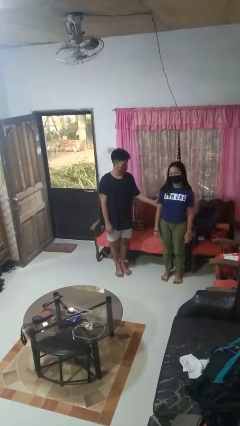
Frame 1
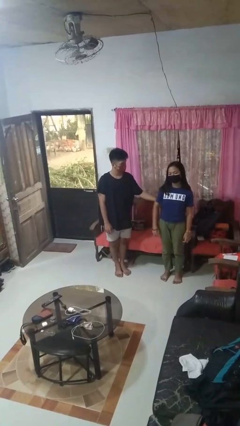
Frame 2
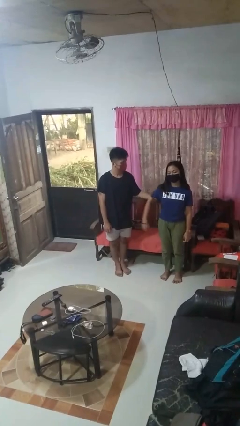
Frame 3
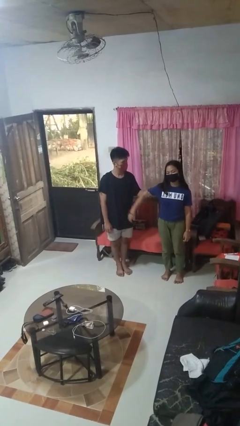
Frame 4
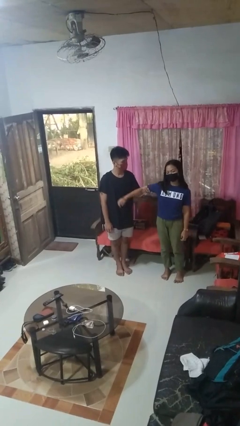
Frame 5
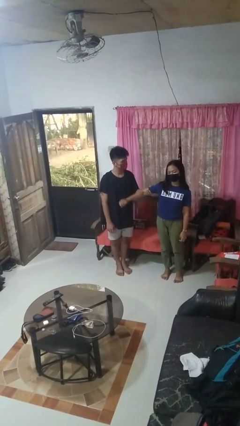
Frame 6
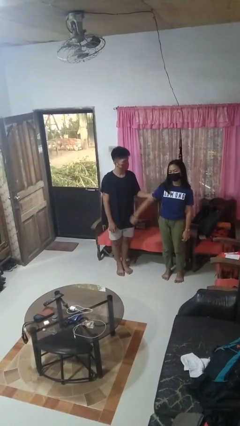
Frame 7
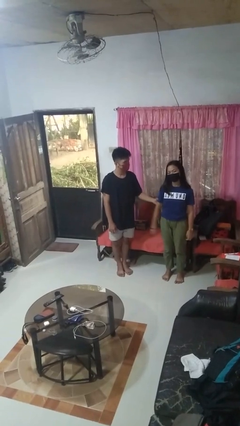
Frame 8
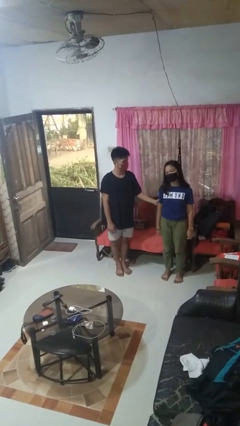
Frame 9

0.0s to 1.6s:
person grabs person by bicep

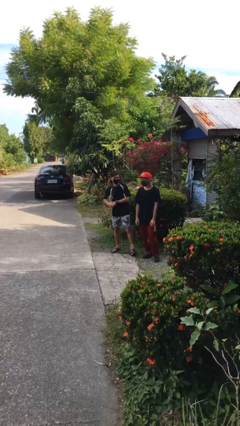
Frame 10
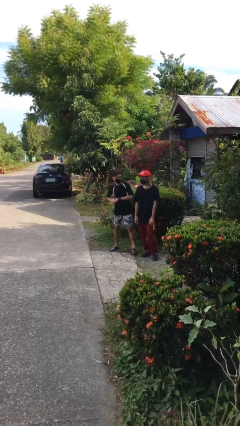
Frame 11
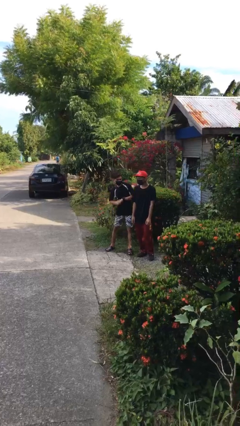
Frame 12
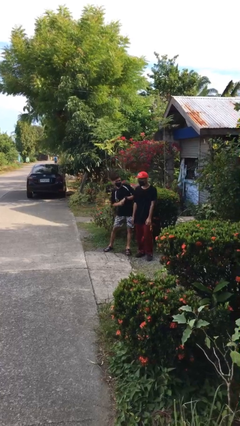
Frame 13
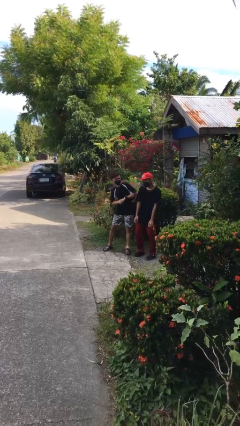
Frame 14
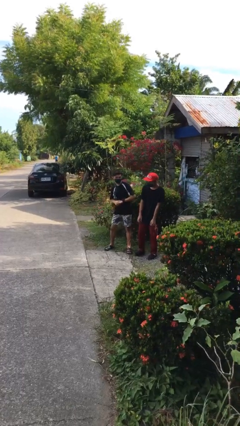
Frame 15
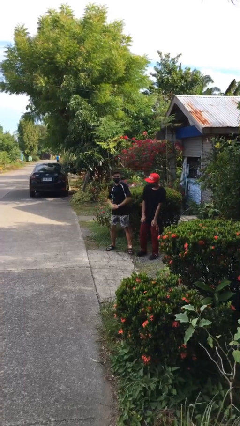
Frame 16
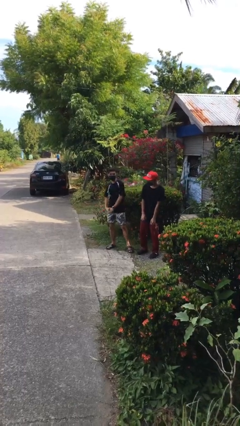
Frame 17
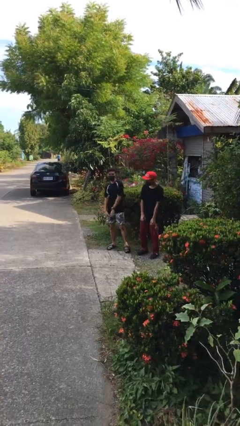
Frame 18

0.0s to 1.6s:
person nudges person with elbow

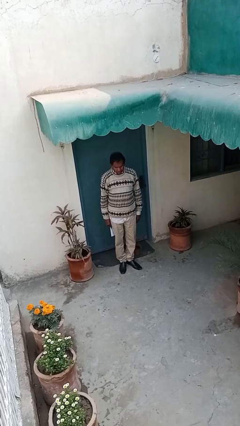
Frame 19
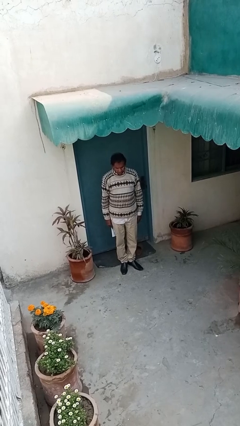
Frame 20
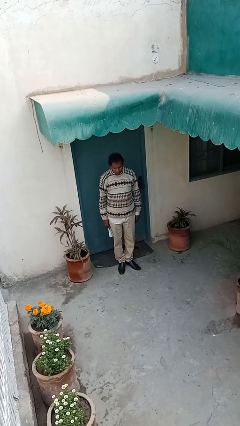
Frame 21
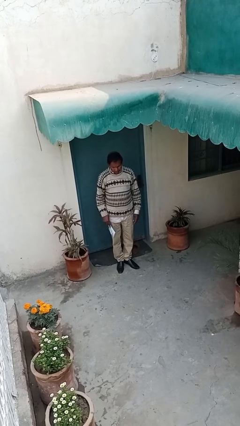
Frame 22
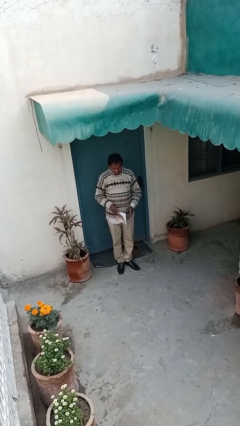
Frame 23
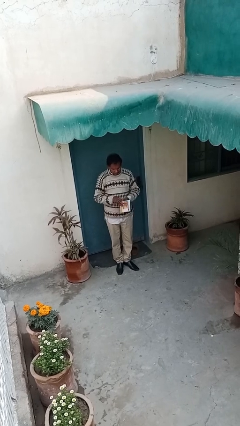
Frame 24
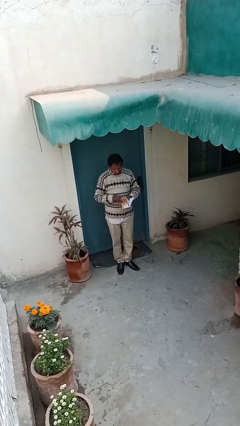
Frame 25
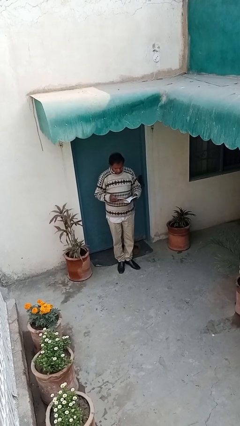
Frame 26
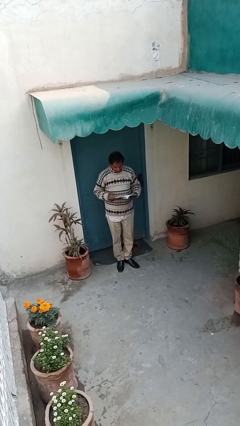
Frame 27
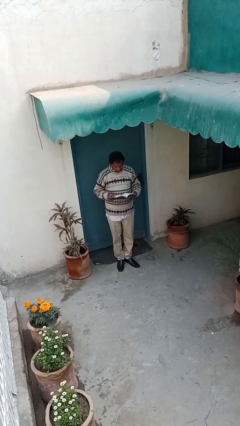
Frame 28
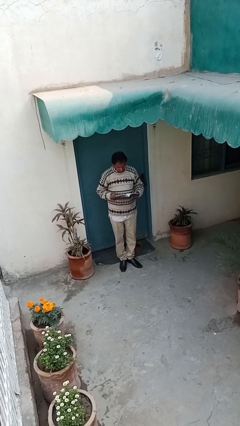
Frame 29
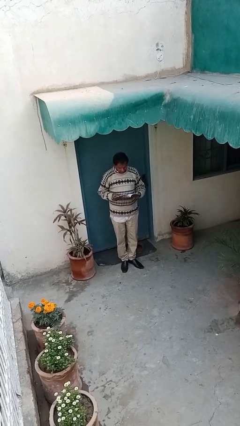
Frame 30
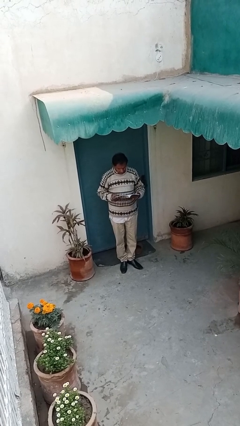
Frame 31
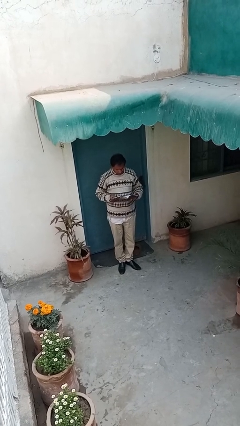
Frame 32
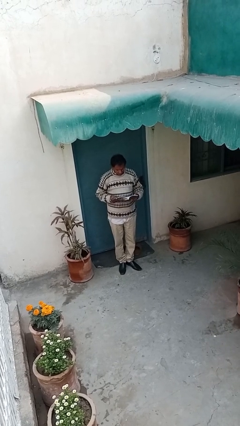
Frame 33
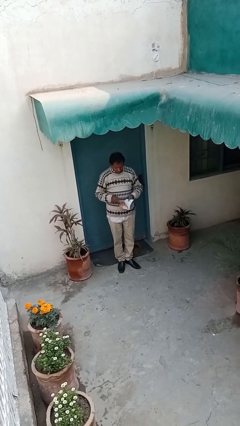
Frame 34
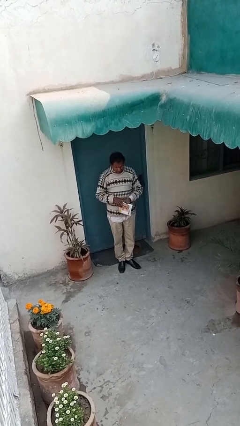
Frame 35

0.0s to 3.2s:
person reads document

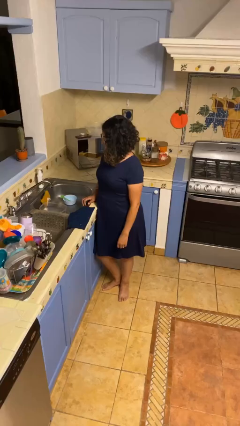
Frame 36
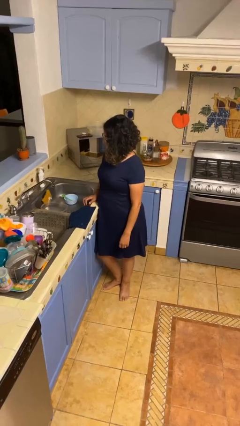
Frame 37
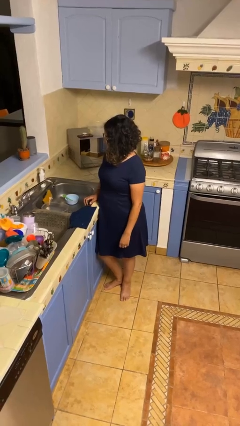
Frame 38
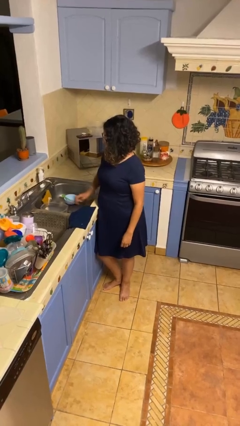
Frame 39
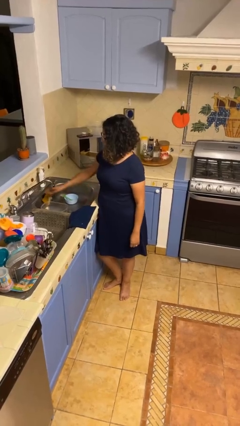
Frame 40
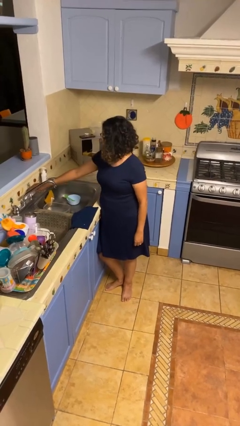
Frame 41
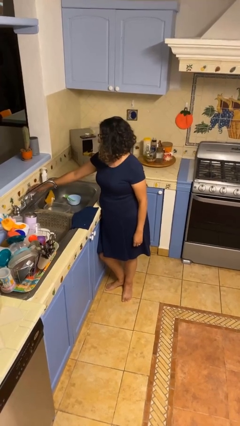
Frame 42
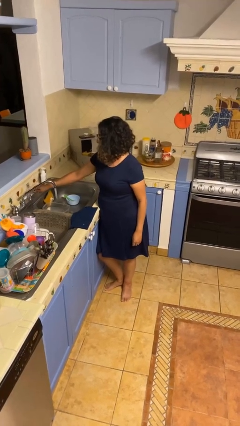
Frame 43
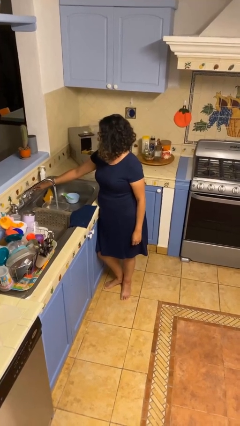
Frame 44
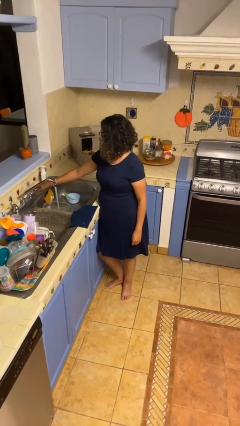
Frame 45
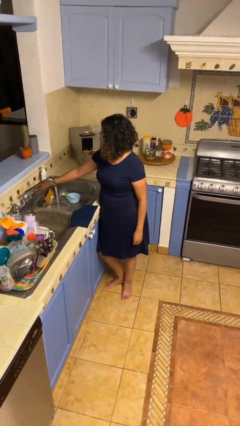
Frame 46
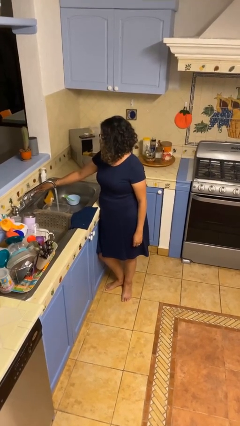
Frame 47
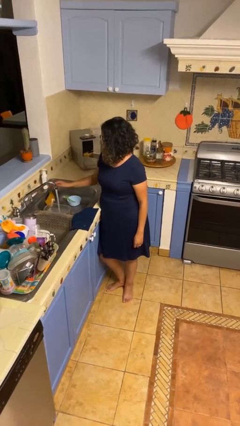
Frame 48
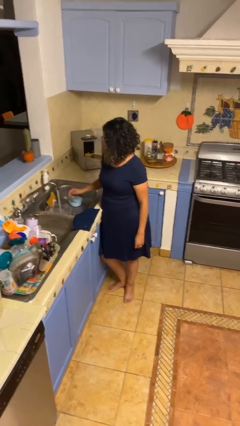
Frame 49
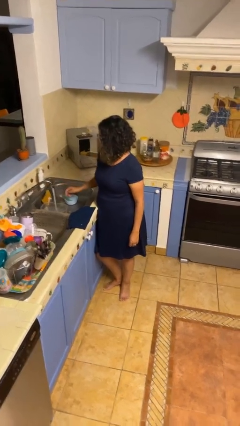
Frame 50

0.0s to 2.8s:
person turns on faucet

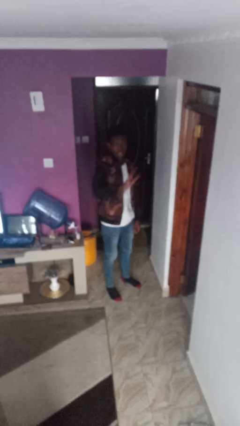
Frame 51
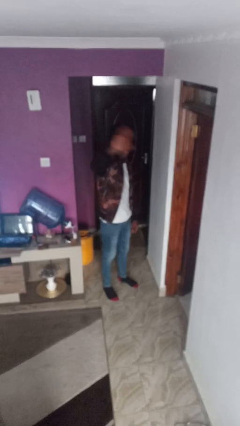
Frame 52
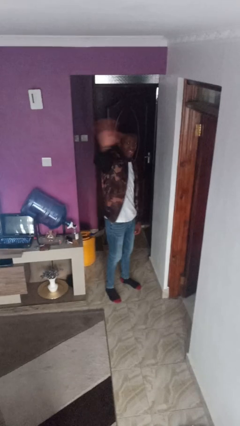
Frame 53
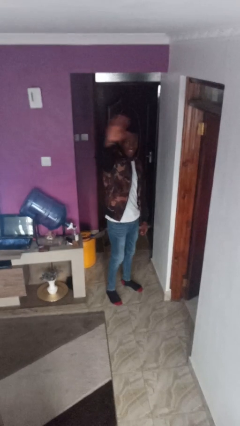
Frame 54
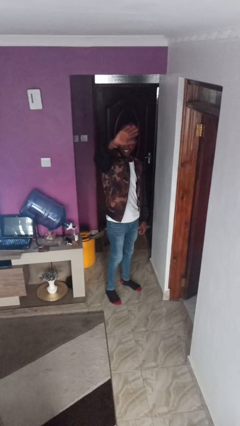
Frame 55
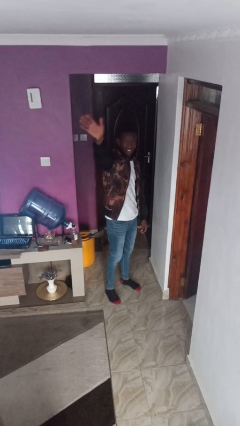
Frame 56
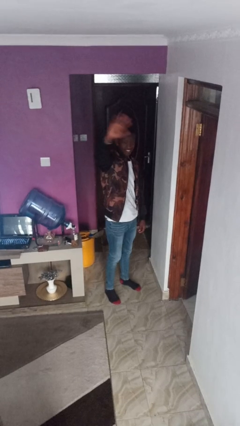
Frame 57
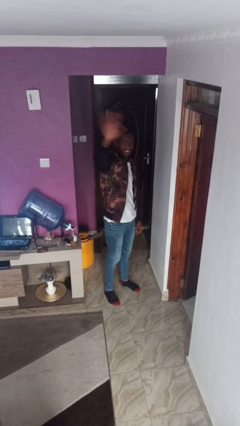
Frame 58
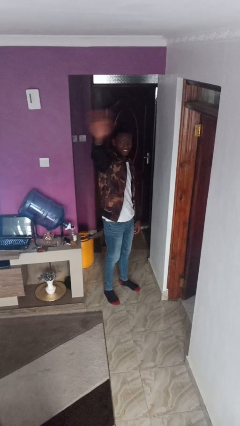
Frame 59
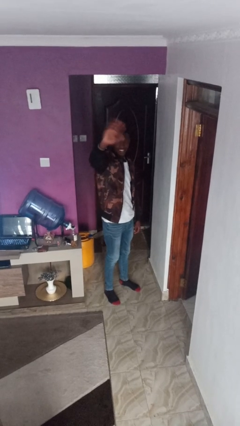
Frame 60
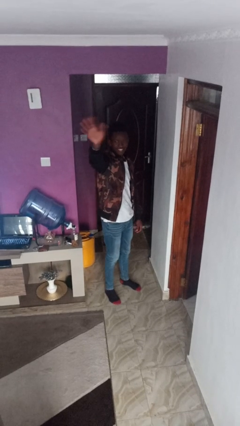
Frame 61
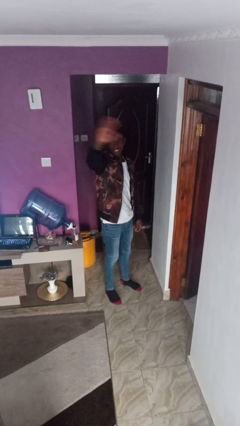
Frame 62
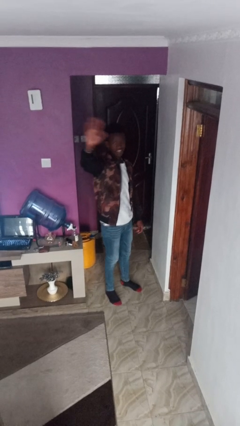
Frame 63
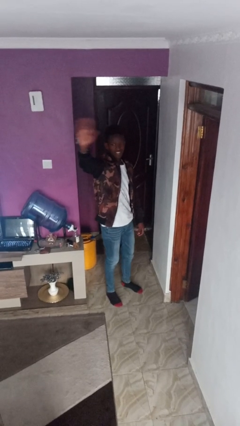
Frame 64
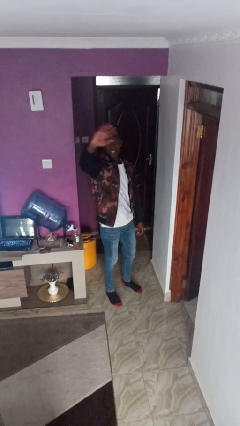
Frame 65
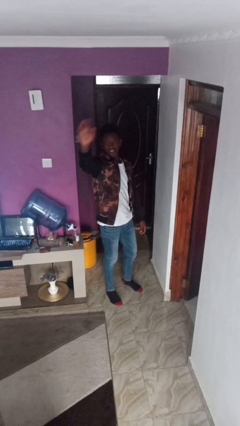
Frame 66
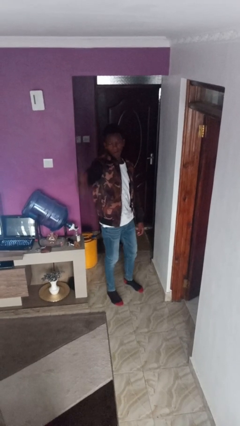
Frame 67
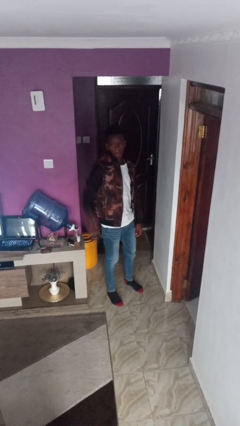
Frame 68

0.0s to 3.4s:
person waves at person

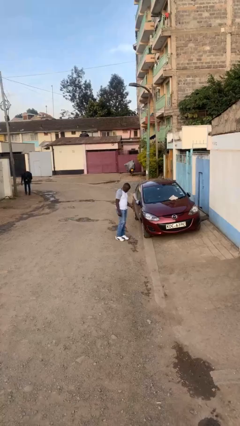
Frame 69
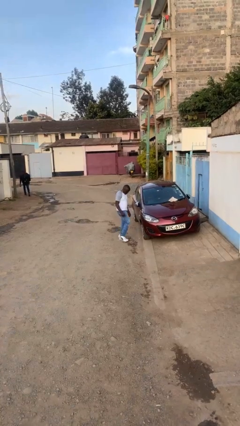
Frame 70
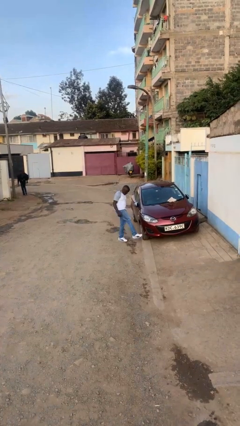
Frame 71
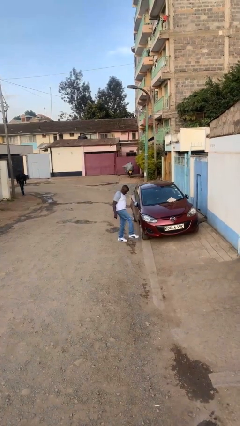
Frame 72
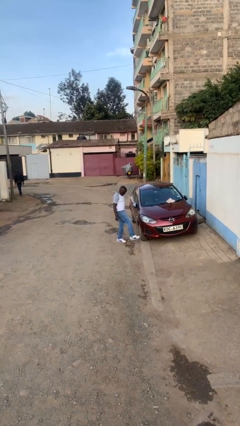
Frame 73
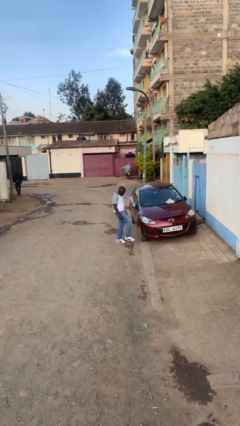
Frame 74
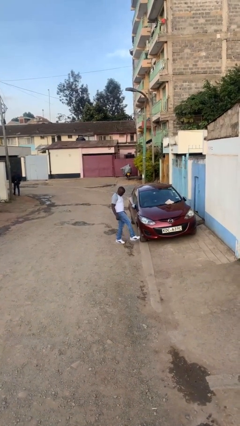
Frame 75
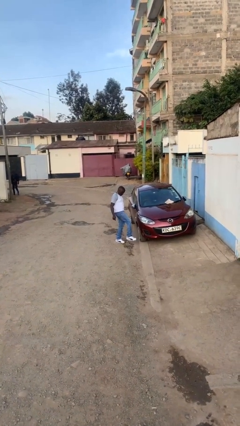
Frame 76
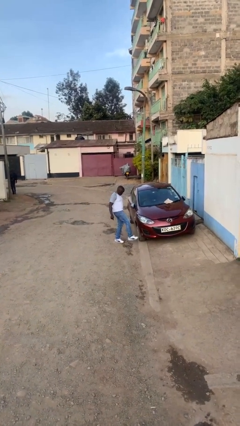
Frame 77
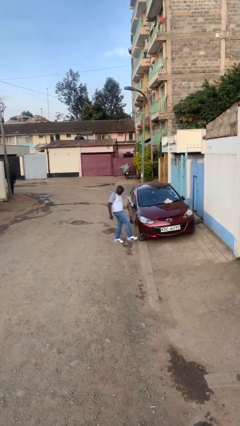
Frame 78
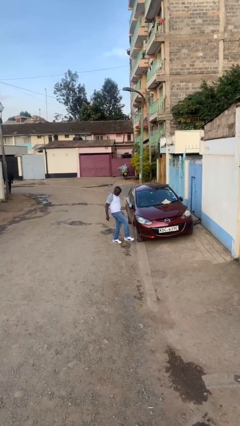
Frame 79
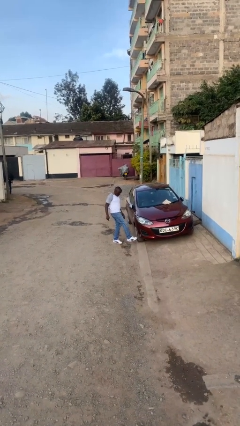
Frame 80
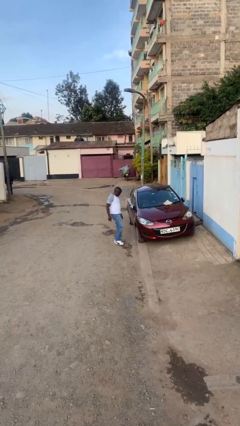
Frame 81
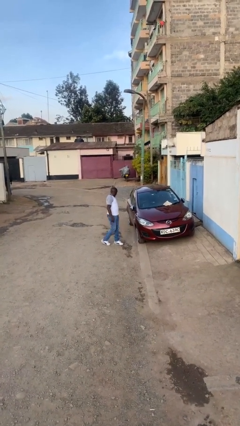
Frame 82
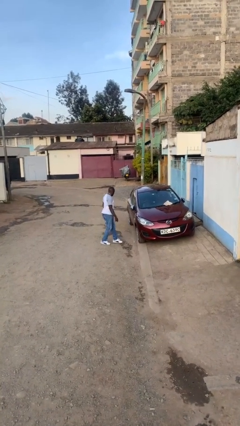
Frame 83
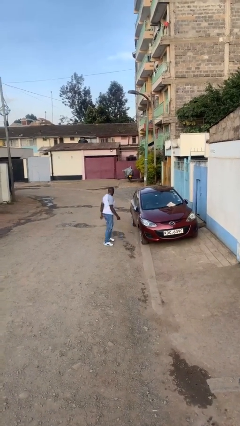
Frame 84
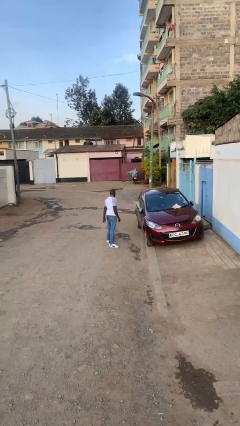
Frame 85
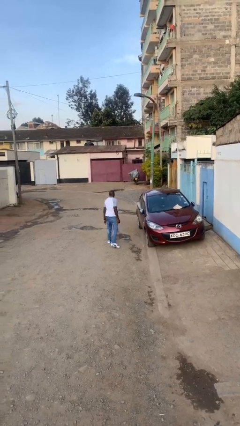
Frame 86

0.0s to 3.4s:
person kicks car tires

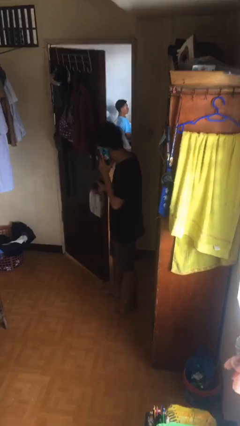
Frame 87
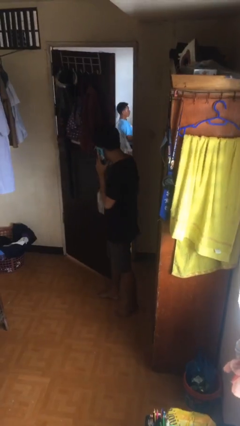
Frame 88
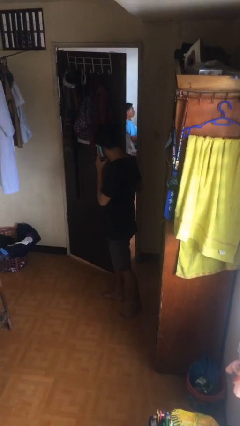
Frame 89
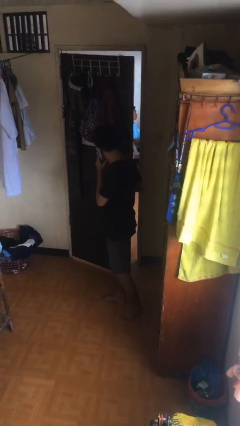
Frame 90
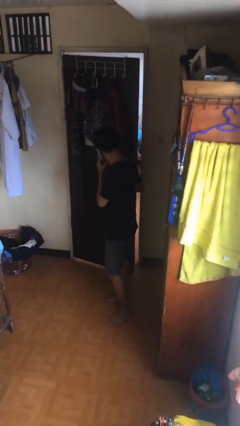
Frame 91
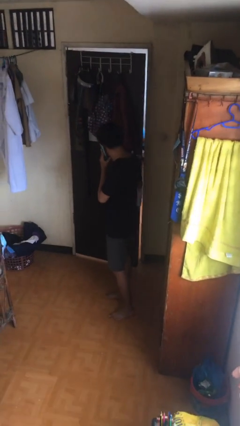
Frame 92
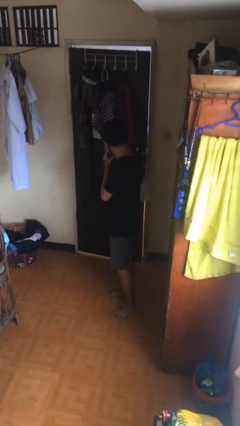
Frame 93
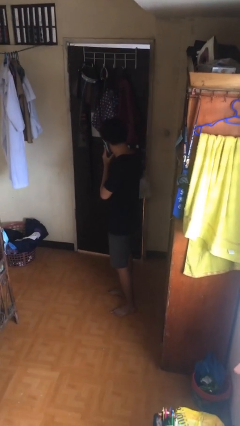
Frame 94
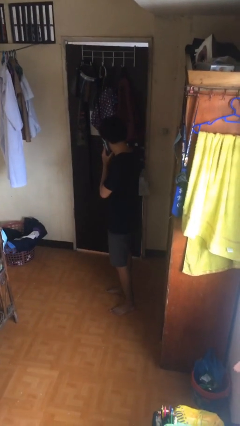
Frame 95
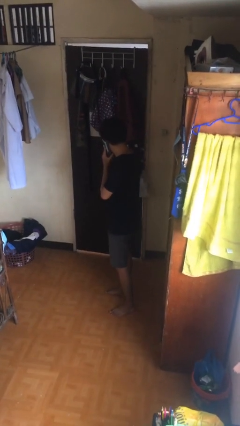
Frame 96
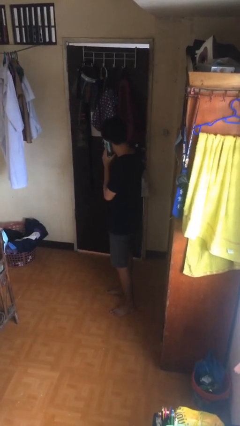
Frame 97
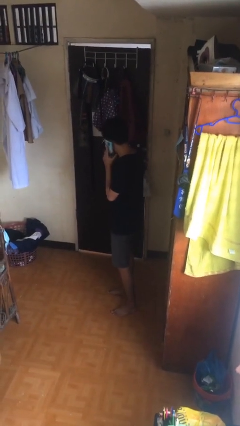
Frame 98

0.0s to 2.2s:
person closes facility door
